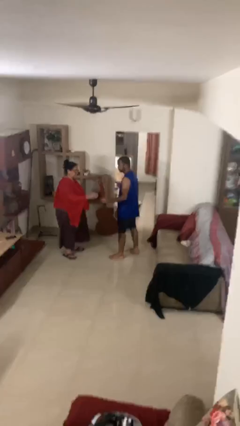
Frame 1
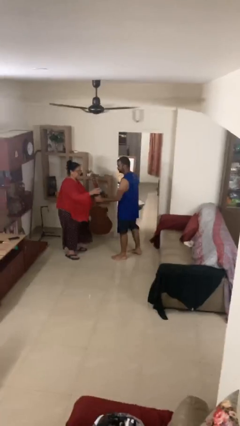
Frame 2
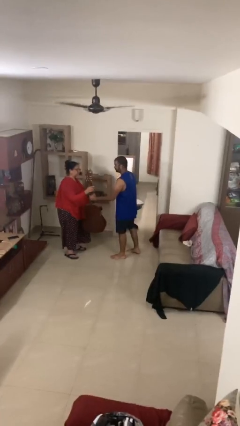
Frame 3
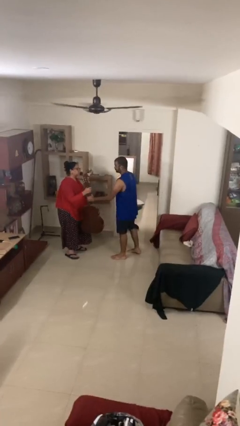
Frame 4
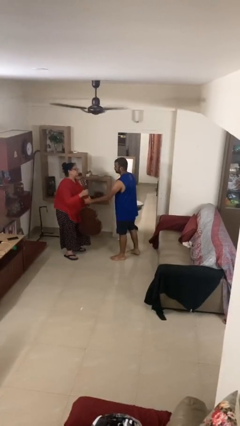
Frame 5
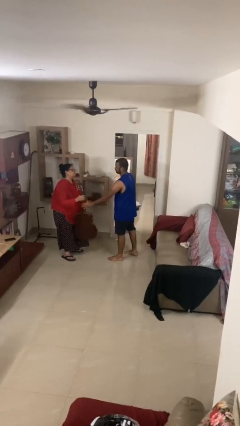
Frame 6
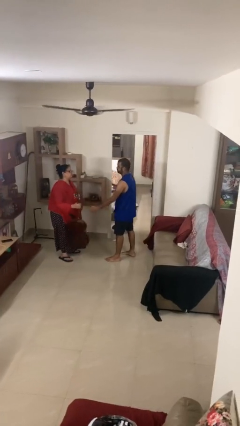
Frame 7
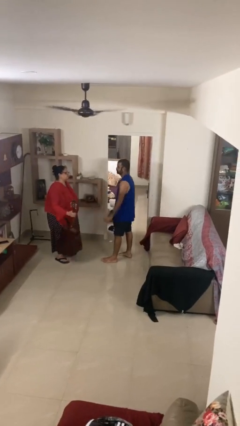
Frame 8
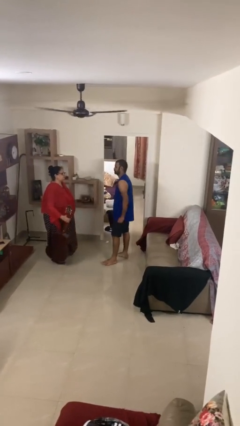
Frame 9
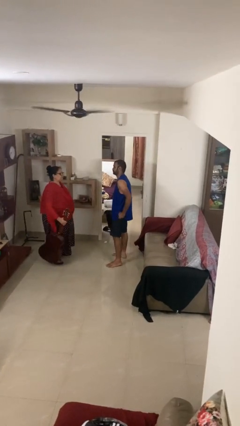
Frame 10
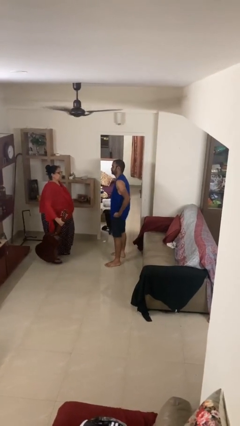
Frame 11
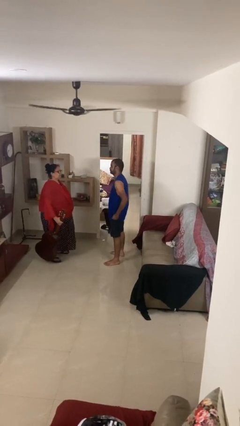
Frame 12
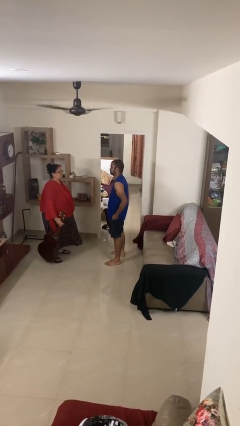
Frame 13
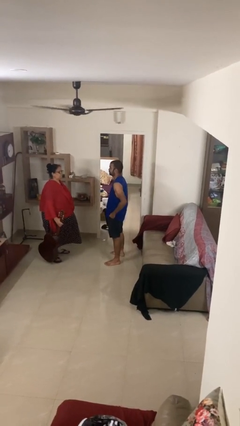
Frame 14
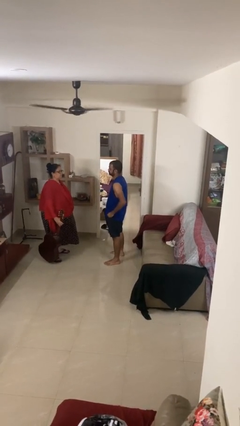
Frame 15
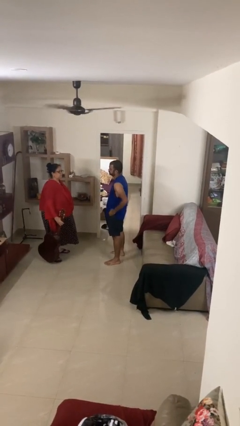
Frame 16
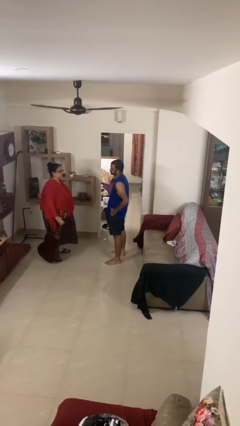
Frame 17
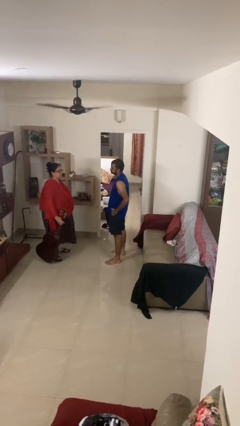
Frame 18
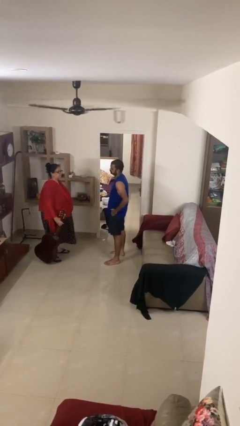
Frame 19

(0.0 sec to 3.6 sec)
person transfers object to person

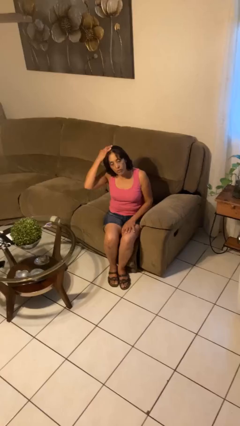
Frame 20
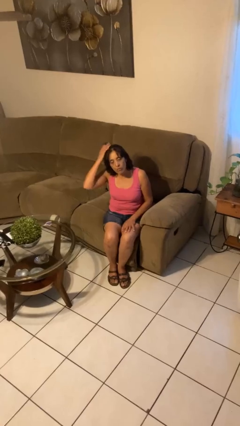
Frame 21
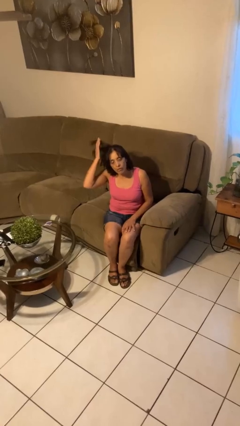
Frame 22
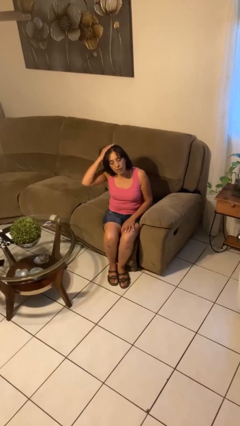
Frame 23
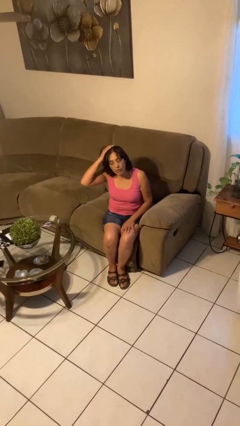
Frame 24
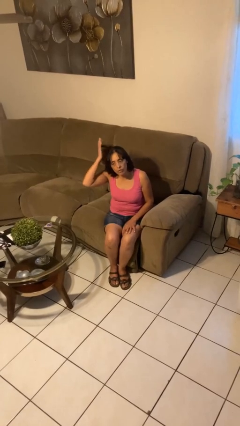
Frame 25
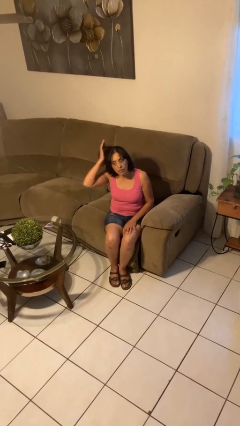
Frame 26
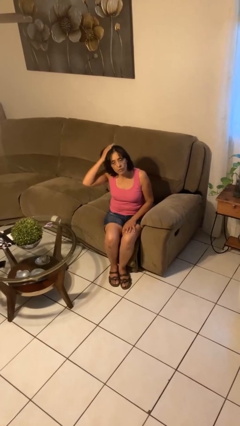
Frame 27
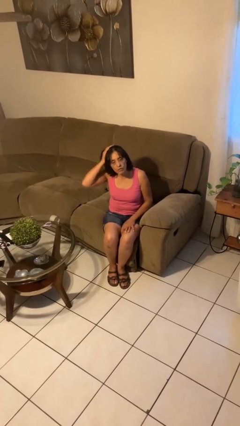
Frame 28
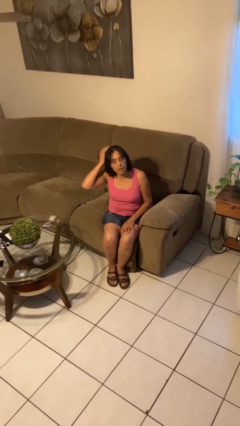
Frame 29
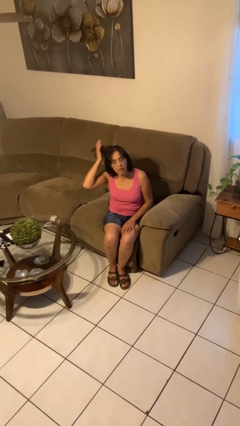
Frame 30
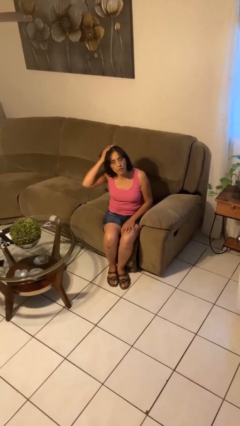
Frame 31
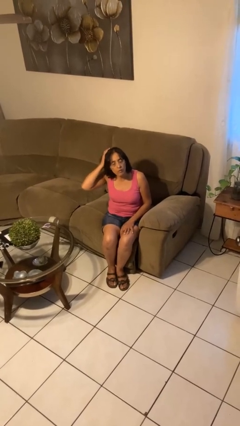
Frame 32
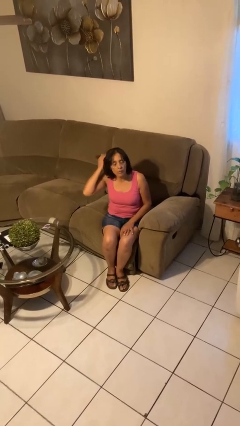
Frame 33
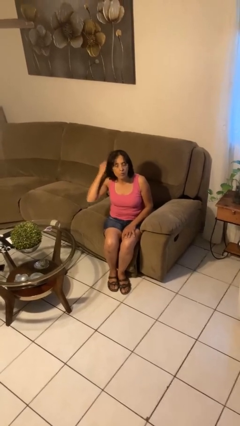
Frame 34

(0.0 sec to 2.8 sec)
person pats head

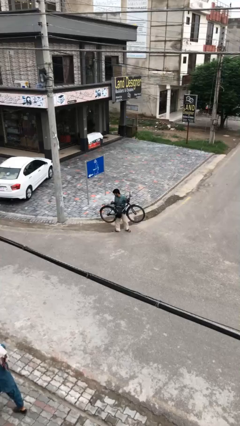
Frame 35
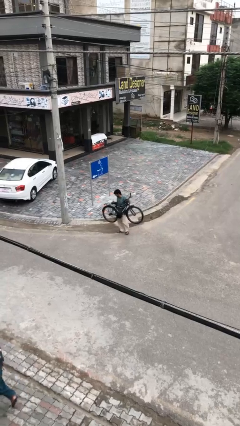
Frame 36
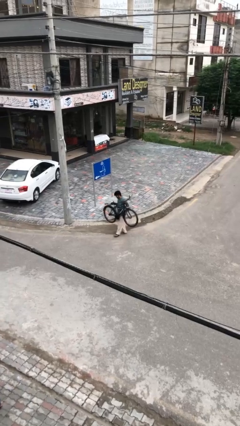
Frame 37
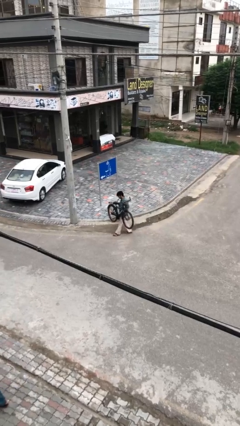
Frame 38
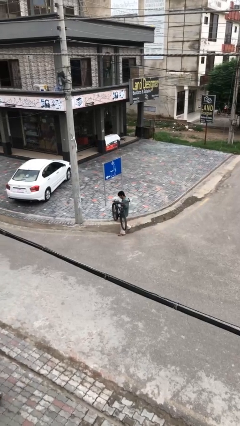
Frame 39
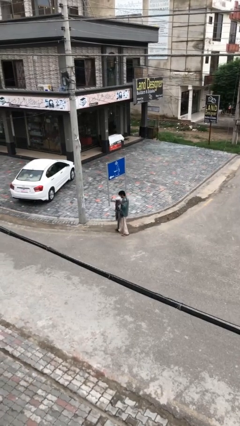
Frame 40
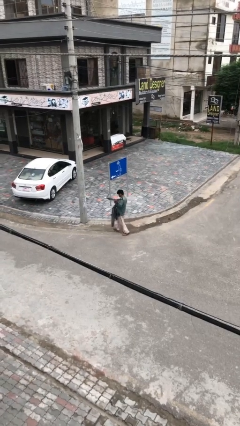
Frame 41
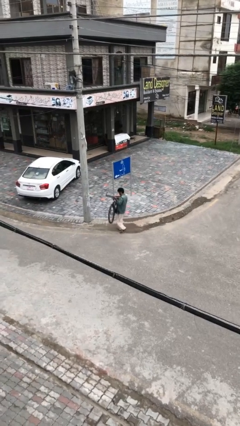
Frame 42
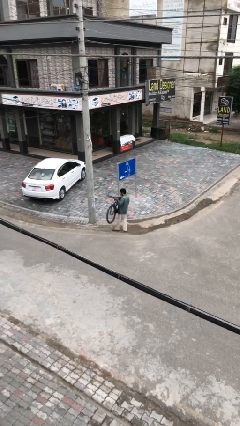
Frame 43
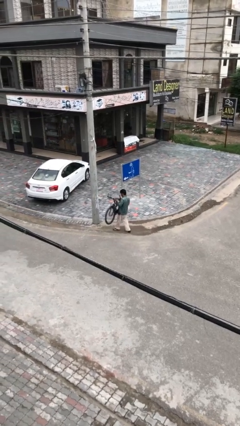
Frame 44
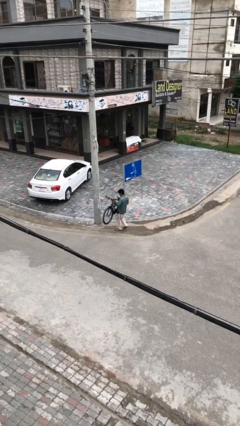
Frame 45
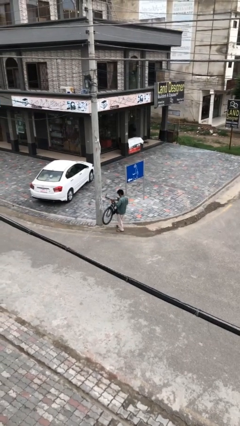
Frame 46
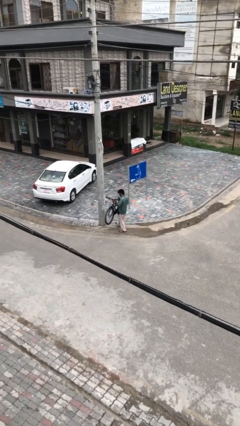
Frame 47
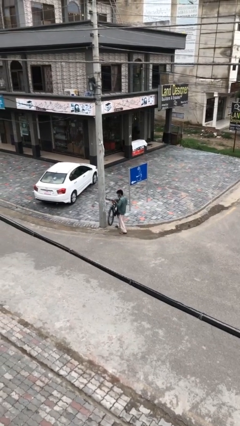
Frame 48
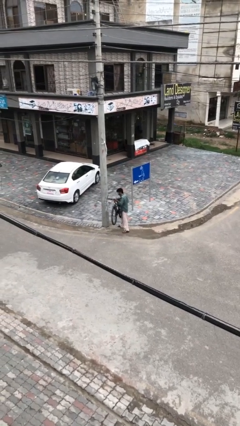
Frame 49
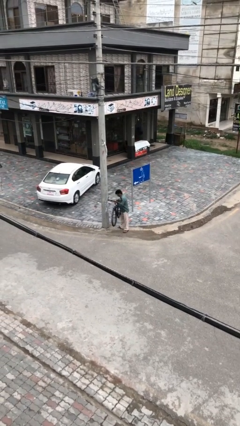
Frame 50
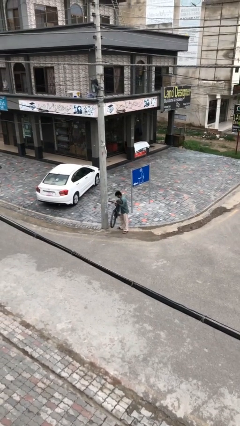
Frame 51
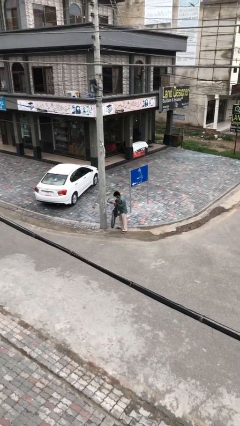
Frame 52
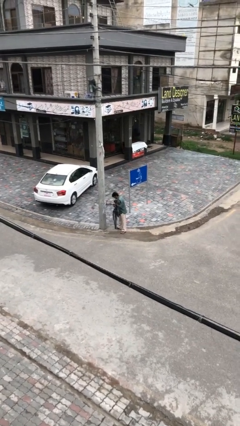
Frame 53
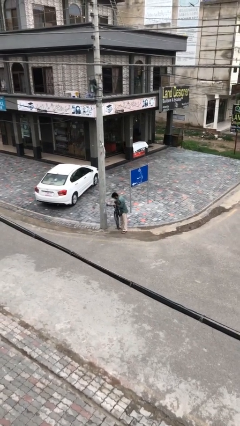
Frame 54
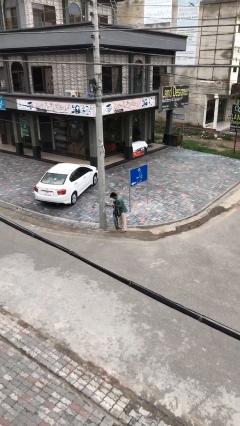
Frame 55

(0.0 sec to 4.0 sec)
person carries heavy object

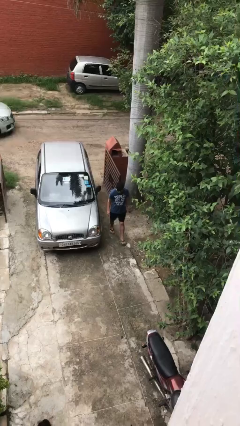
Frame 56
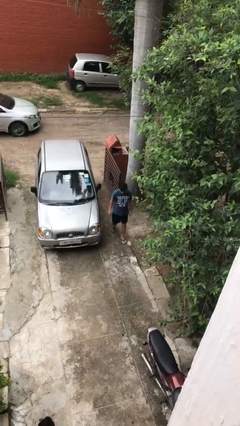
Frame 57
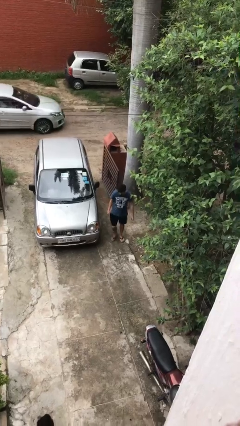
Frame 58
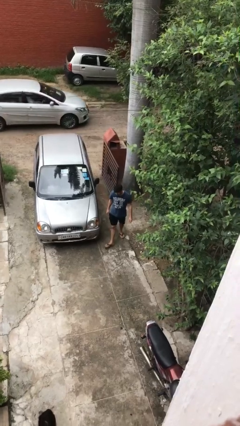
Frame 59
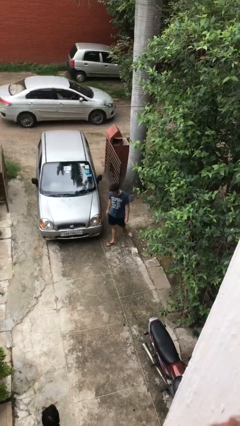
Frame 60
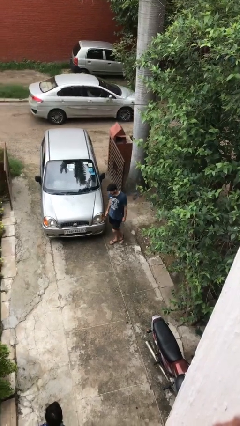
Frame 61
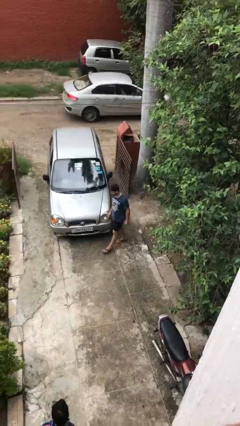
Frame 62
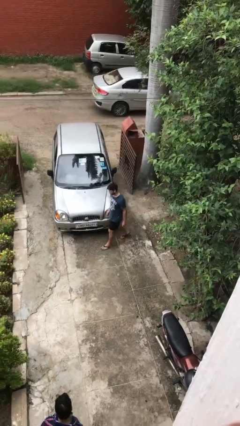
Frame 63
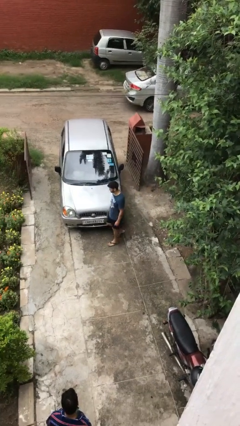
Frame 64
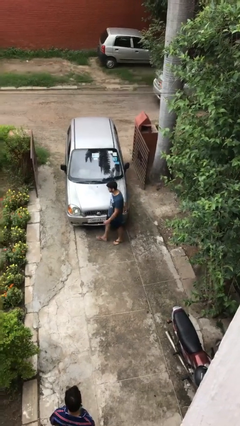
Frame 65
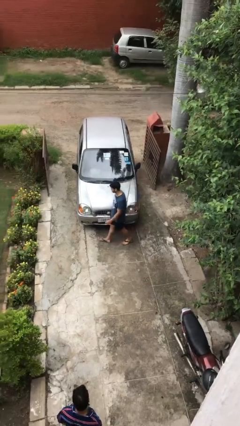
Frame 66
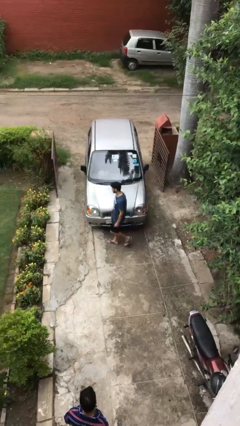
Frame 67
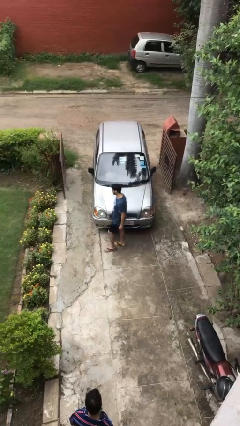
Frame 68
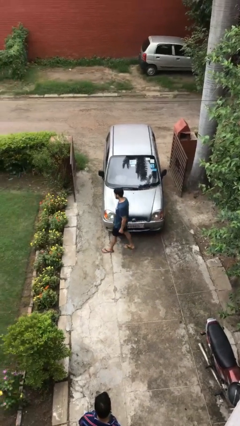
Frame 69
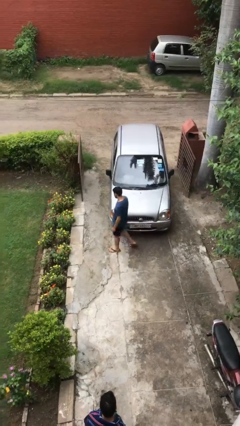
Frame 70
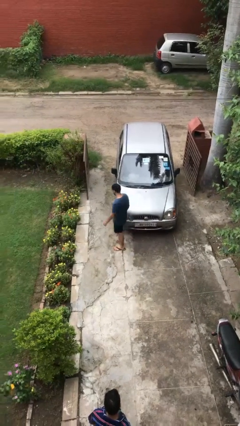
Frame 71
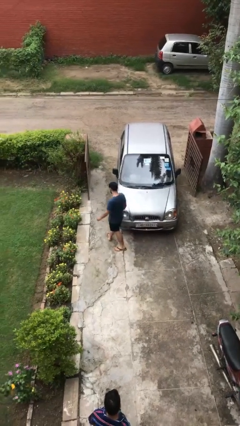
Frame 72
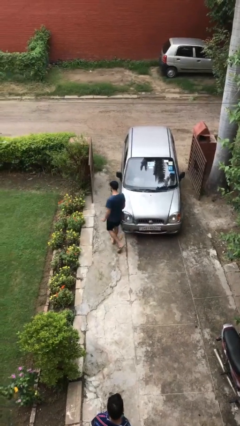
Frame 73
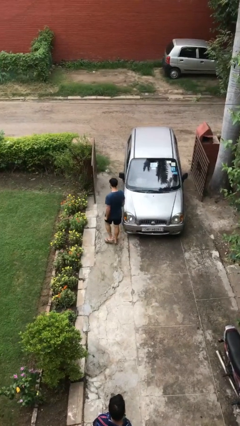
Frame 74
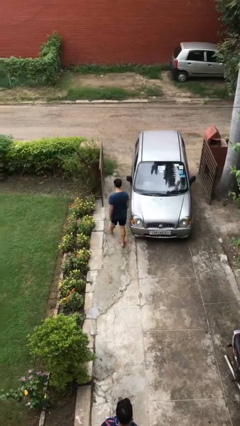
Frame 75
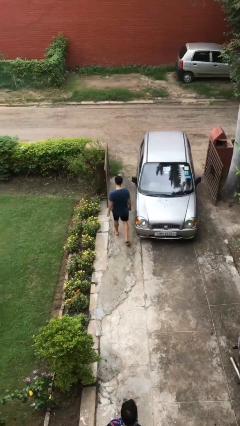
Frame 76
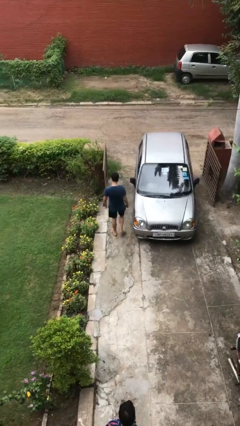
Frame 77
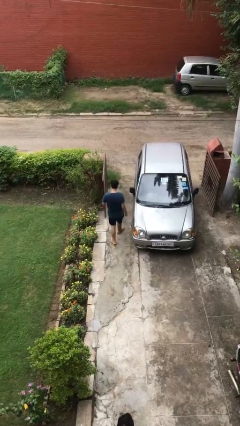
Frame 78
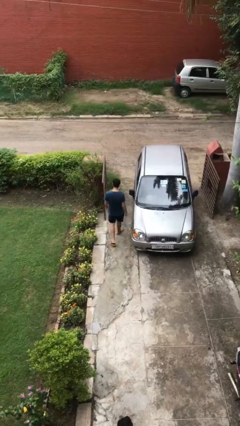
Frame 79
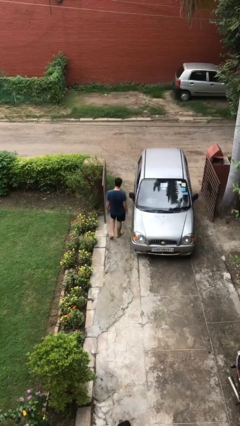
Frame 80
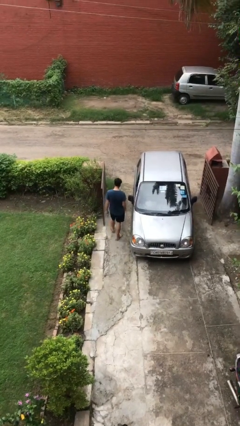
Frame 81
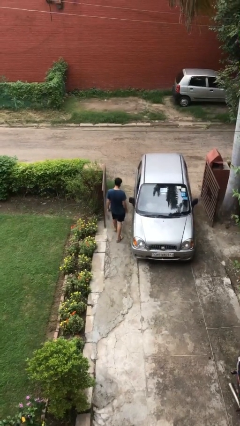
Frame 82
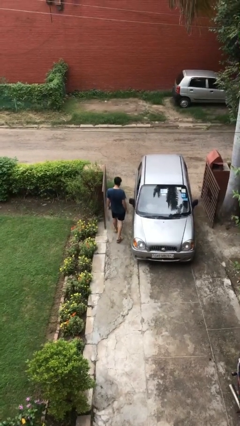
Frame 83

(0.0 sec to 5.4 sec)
person walks around car

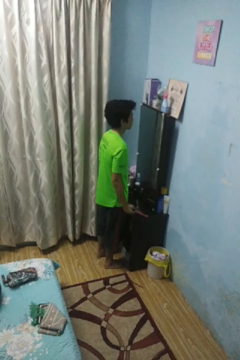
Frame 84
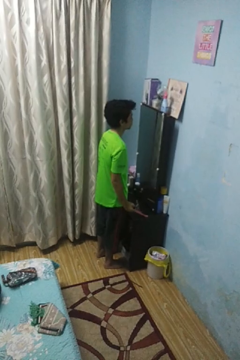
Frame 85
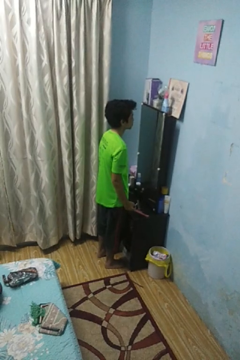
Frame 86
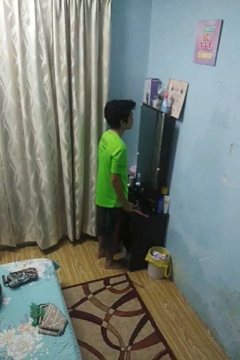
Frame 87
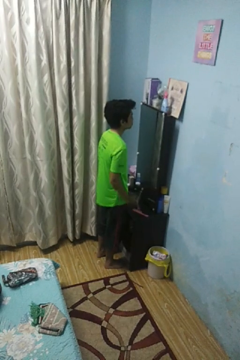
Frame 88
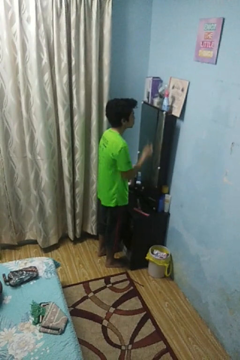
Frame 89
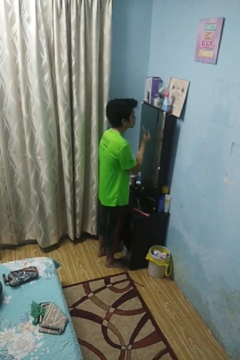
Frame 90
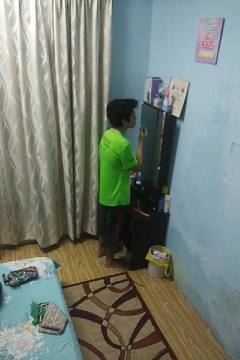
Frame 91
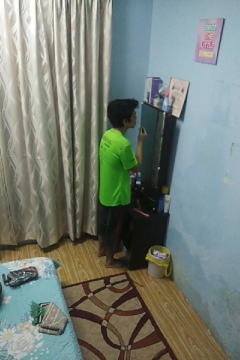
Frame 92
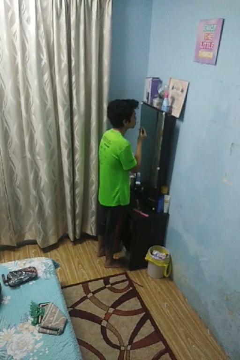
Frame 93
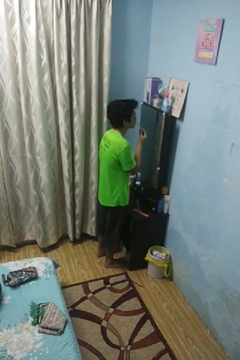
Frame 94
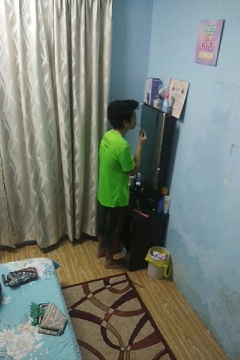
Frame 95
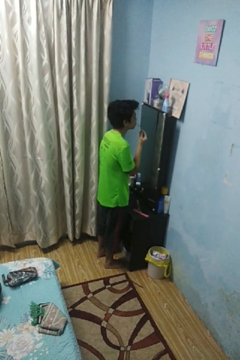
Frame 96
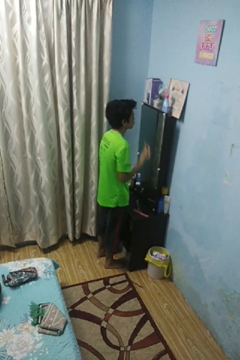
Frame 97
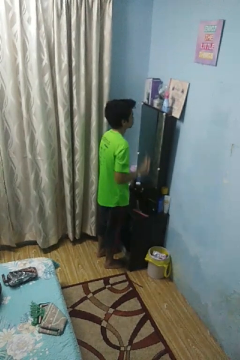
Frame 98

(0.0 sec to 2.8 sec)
person applies lip makeup
